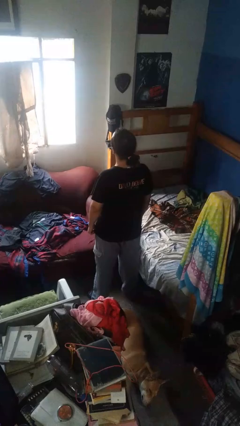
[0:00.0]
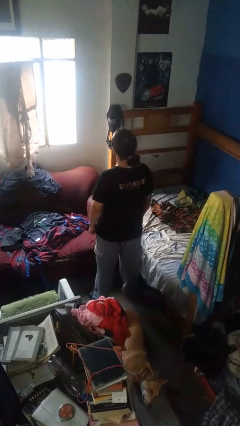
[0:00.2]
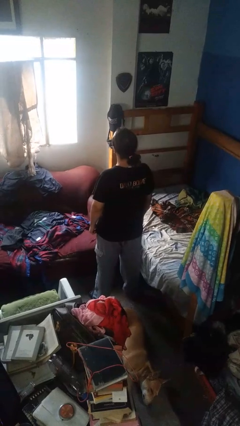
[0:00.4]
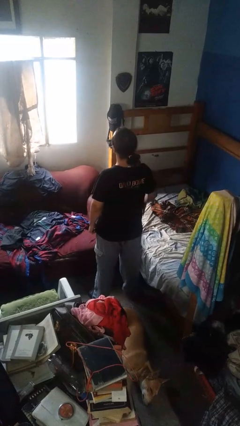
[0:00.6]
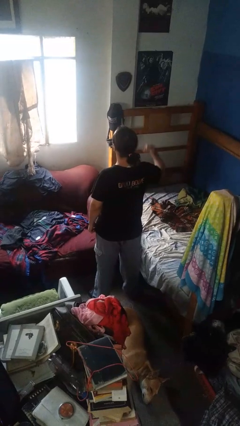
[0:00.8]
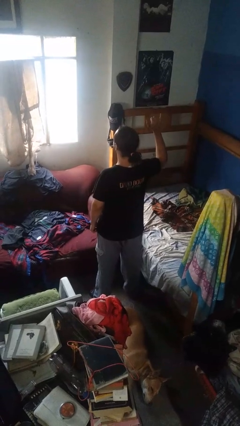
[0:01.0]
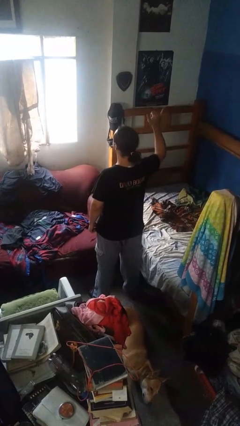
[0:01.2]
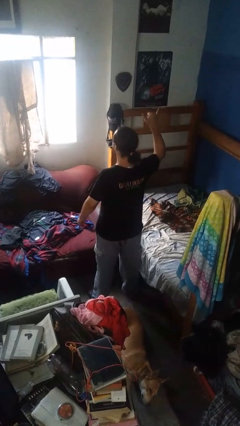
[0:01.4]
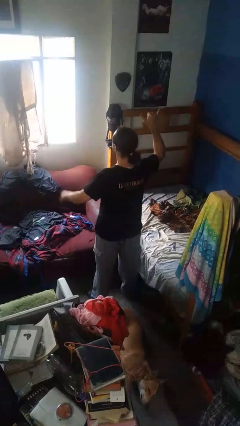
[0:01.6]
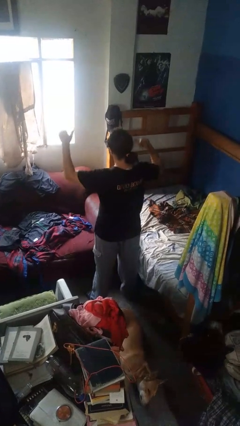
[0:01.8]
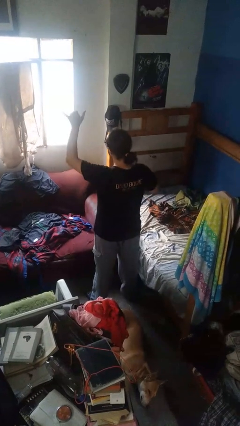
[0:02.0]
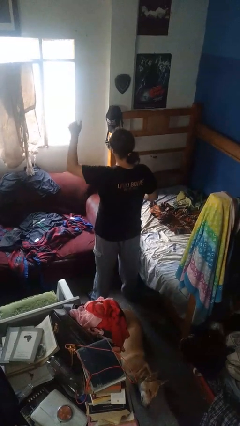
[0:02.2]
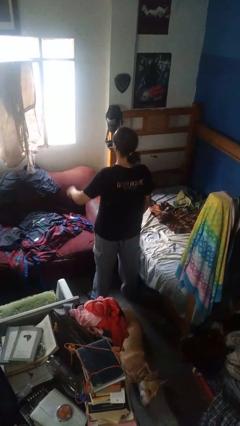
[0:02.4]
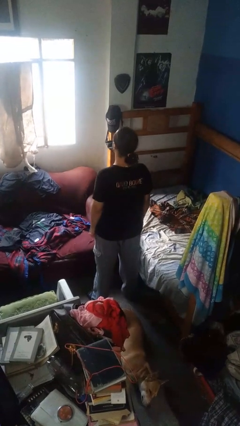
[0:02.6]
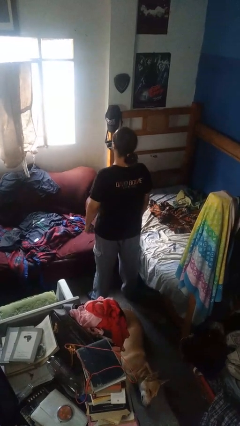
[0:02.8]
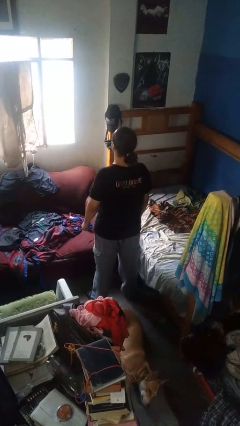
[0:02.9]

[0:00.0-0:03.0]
person gestures hang loose

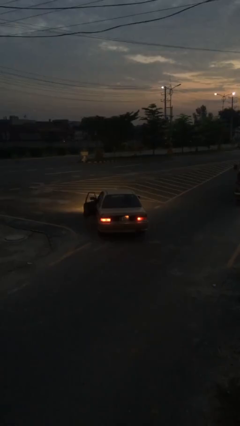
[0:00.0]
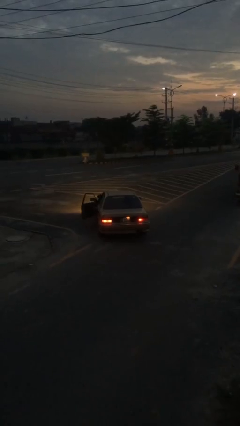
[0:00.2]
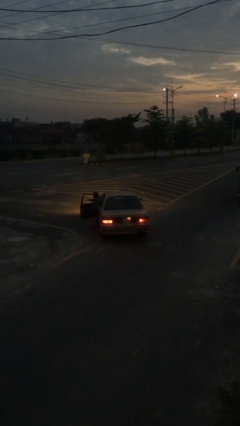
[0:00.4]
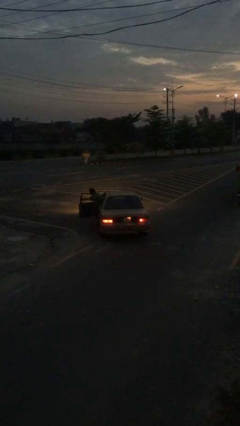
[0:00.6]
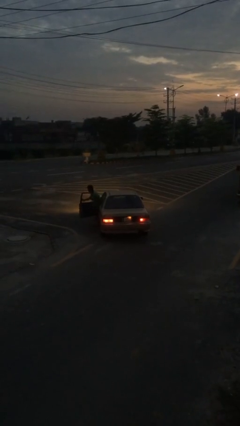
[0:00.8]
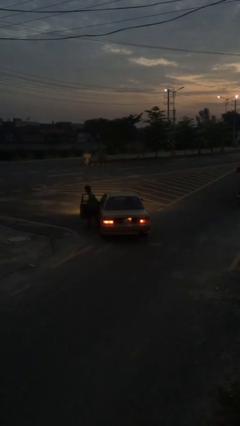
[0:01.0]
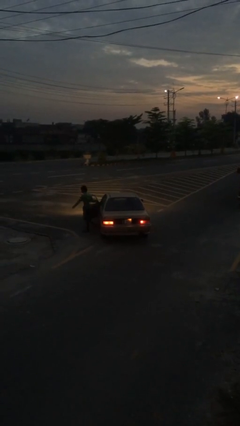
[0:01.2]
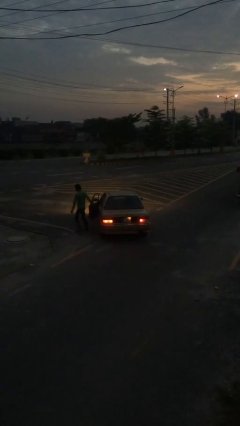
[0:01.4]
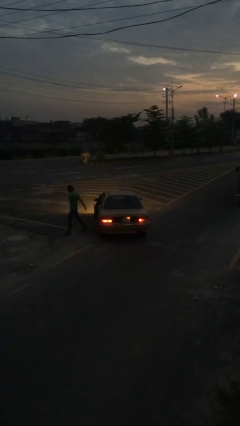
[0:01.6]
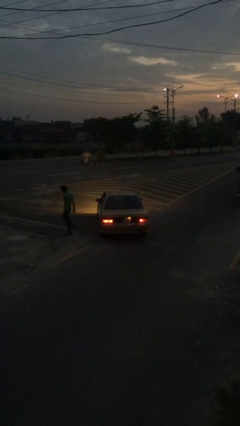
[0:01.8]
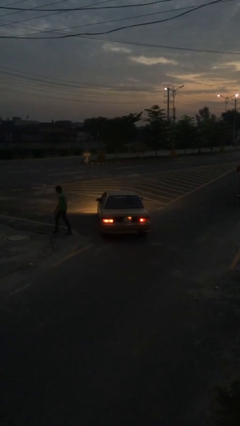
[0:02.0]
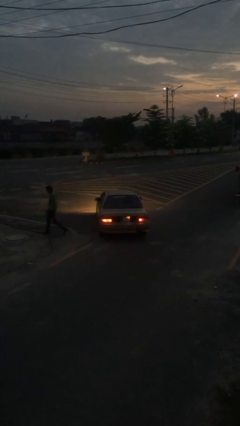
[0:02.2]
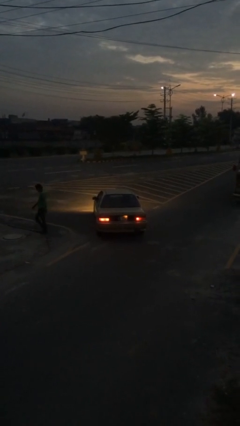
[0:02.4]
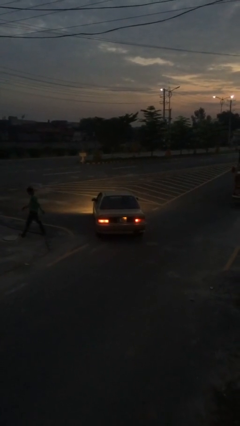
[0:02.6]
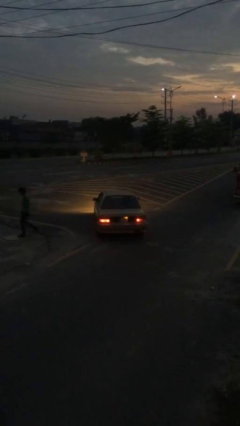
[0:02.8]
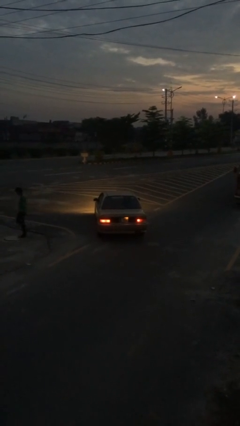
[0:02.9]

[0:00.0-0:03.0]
car drops off person

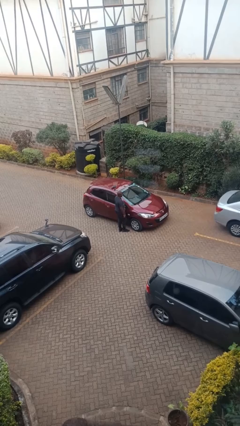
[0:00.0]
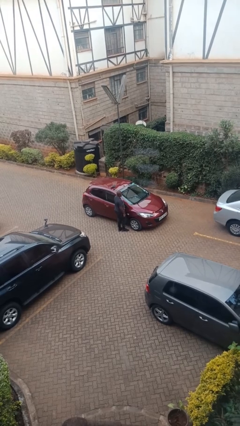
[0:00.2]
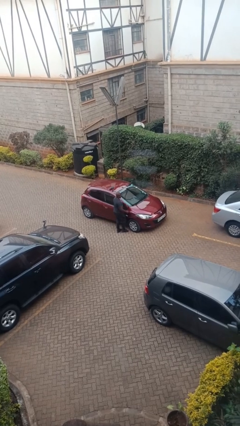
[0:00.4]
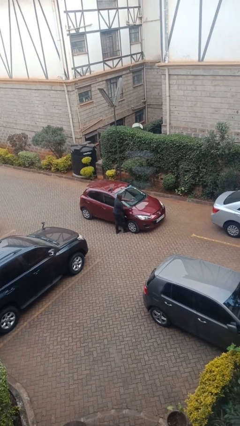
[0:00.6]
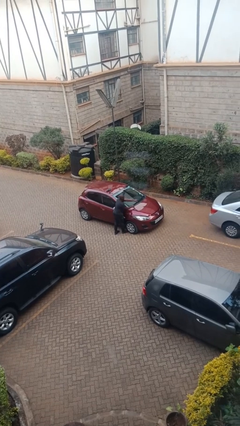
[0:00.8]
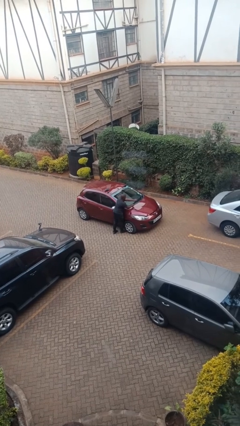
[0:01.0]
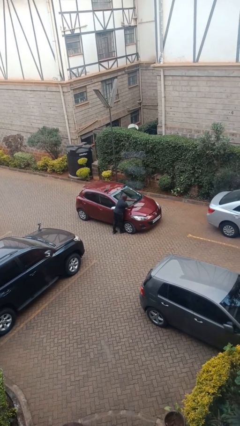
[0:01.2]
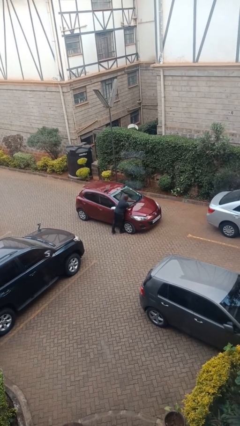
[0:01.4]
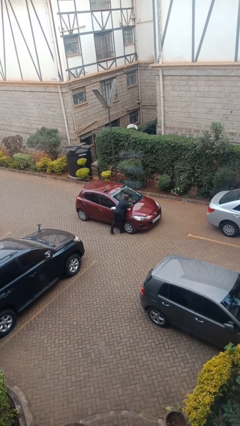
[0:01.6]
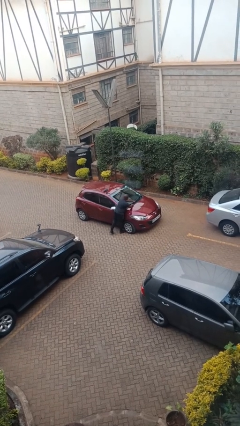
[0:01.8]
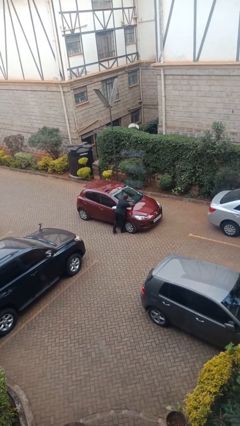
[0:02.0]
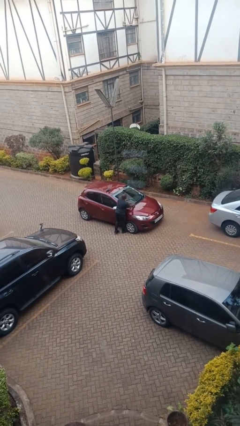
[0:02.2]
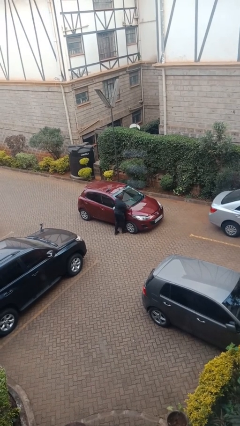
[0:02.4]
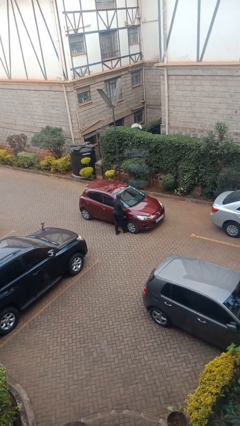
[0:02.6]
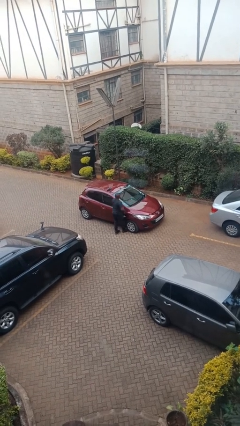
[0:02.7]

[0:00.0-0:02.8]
person flips down car wipers

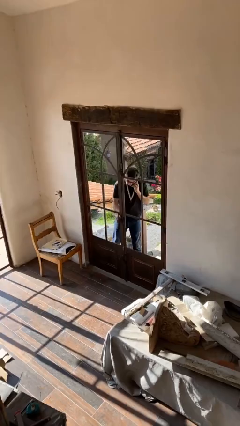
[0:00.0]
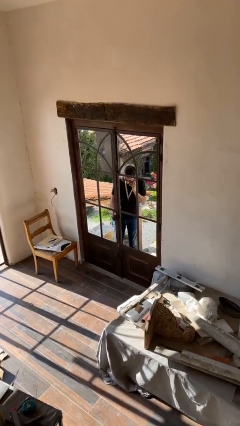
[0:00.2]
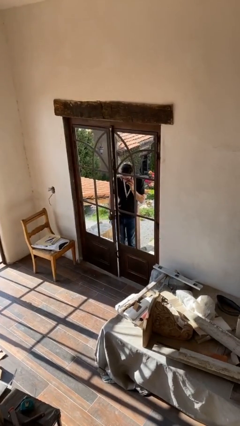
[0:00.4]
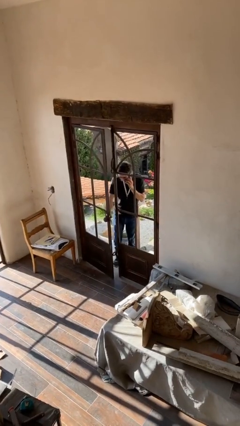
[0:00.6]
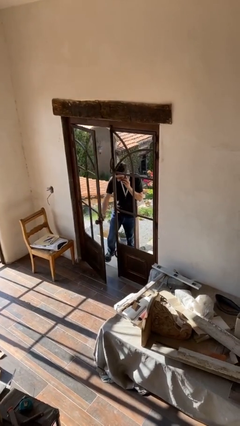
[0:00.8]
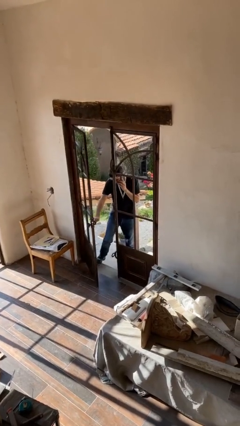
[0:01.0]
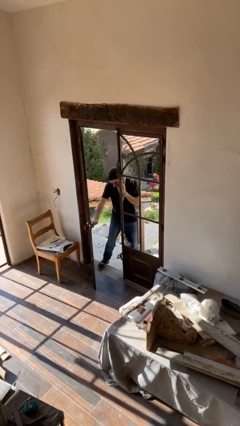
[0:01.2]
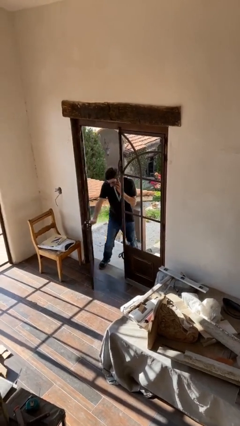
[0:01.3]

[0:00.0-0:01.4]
person opens facility door

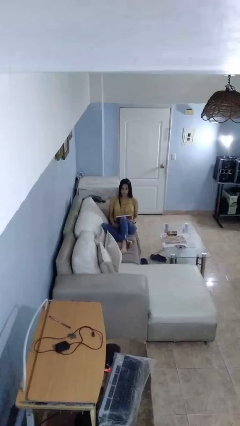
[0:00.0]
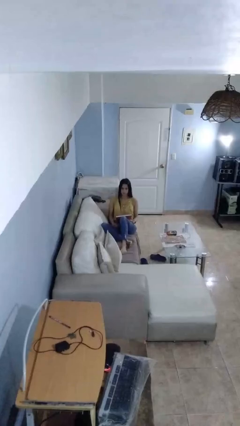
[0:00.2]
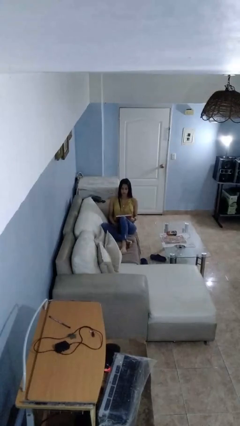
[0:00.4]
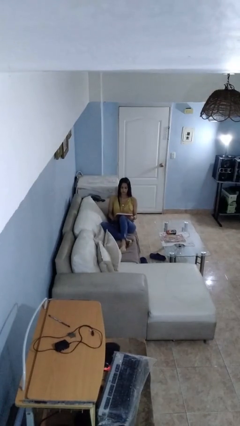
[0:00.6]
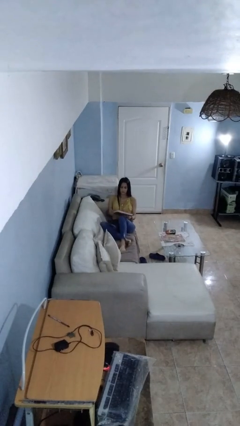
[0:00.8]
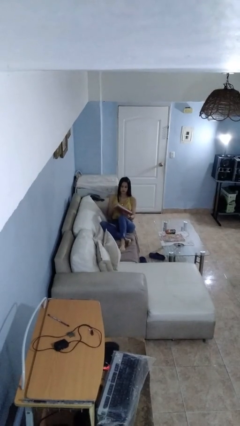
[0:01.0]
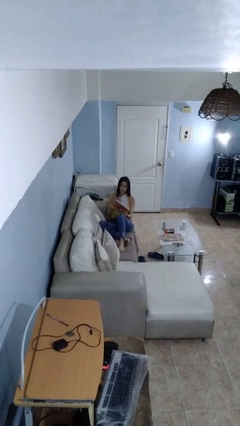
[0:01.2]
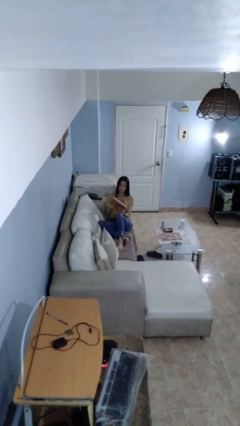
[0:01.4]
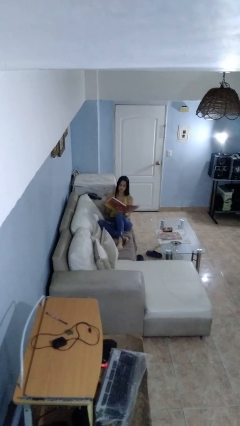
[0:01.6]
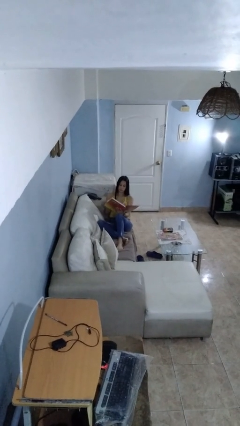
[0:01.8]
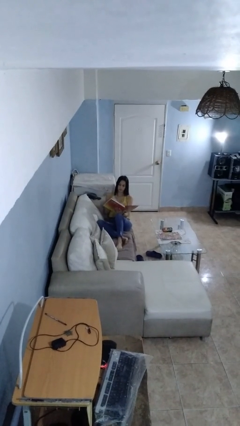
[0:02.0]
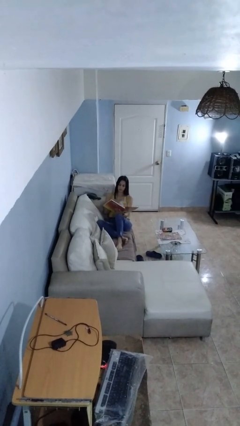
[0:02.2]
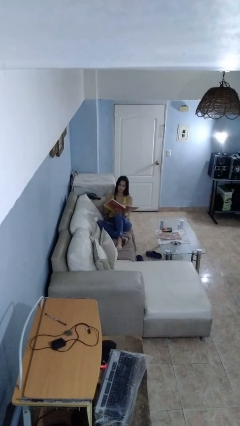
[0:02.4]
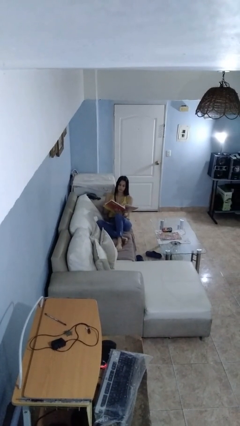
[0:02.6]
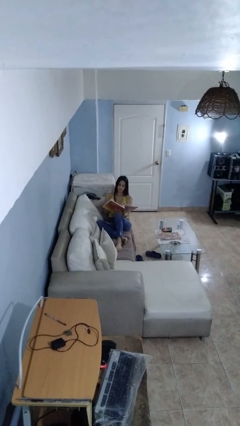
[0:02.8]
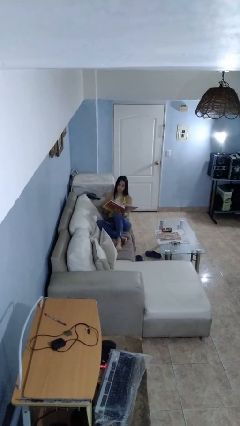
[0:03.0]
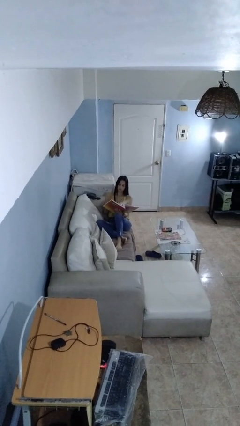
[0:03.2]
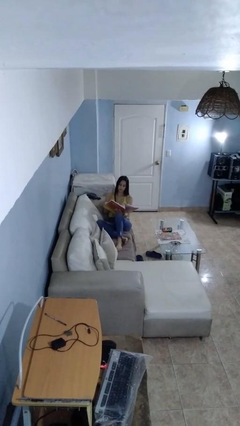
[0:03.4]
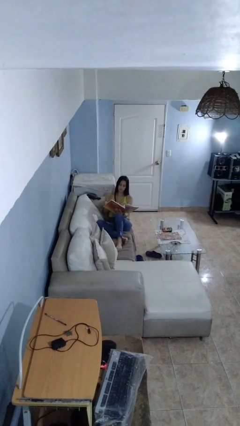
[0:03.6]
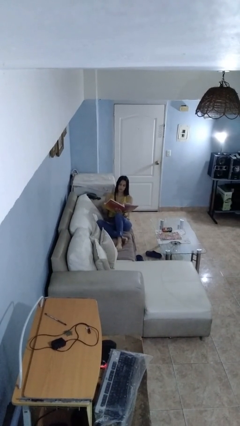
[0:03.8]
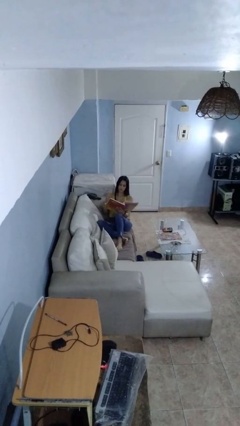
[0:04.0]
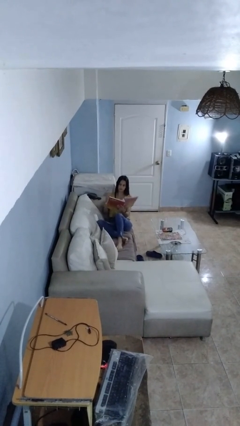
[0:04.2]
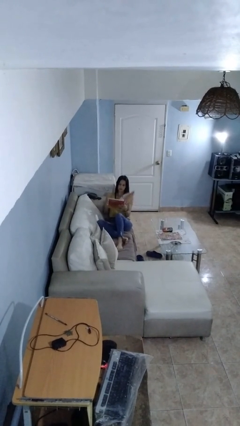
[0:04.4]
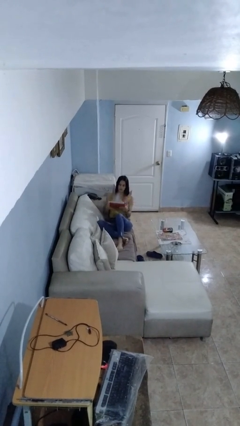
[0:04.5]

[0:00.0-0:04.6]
person reads book

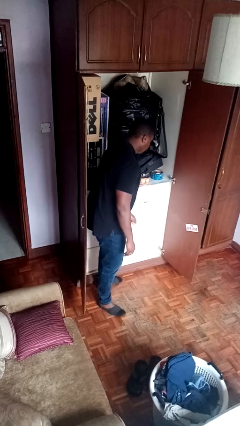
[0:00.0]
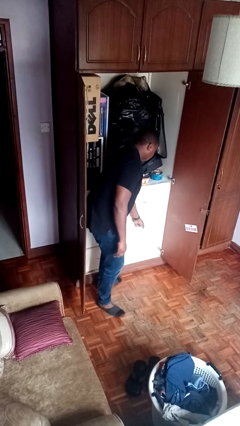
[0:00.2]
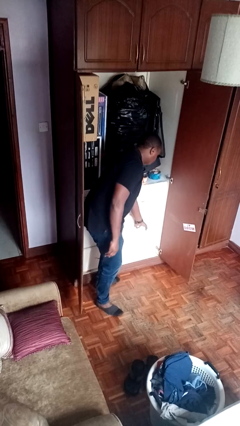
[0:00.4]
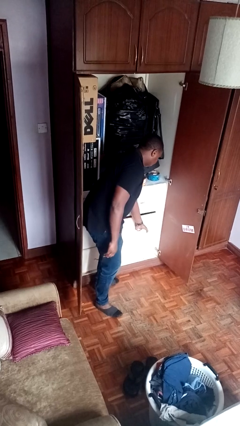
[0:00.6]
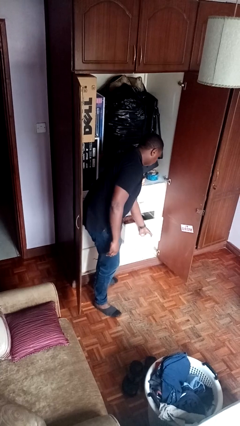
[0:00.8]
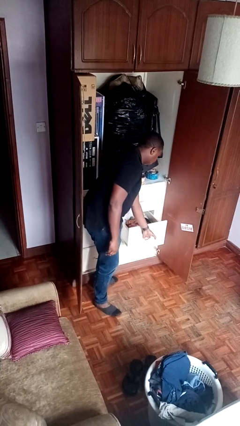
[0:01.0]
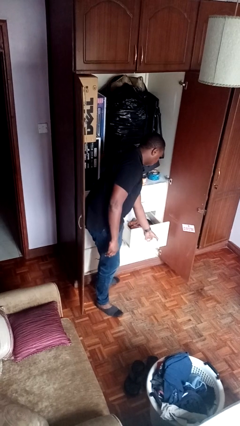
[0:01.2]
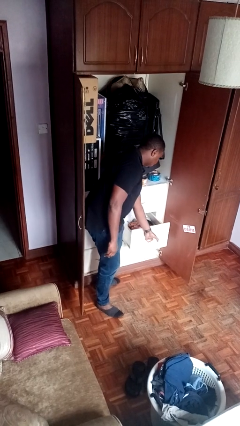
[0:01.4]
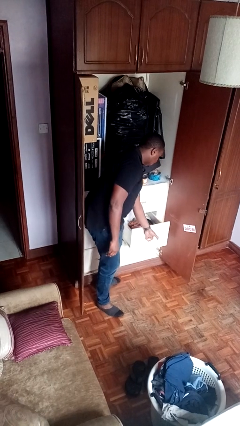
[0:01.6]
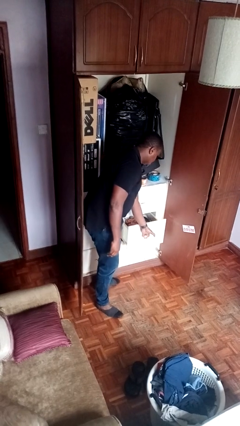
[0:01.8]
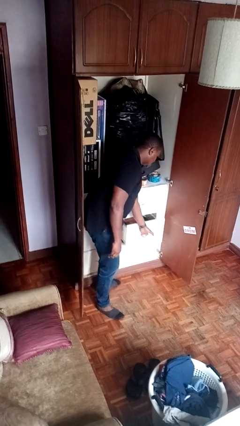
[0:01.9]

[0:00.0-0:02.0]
person opens dresser drawer

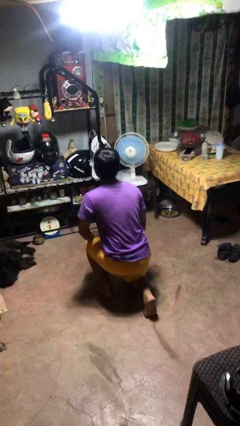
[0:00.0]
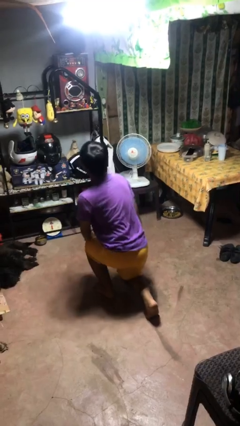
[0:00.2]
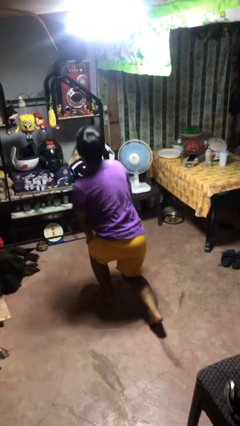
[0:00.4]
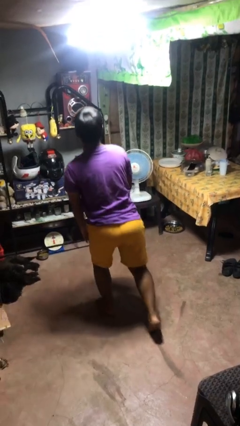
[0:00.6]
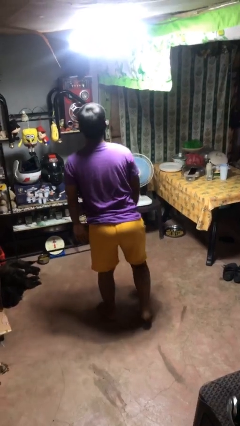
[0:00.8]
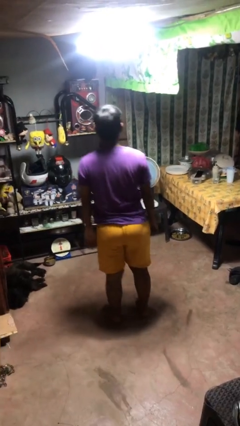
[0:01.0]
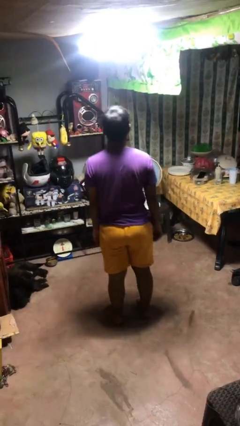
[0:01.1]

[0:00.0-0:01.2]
person stands up from floor
